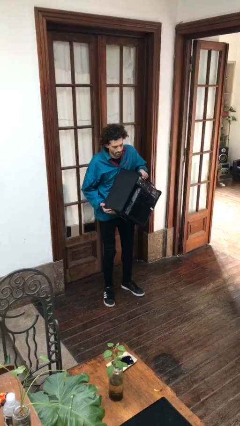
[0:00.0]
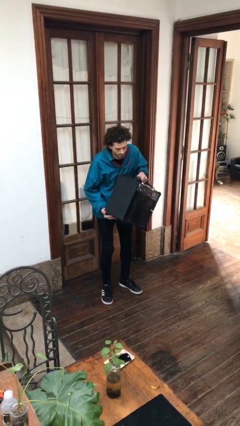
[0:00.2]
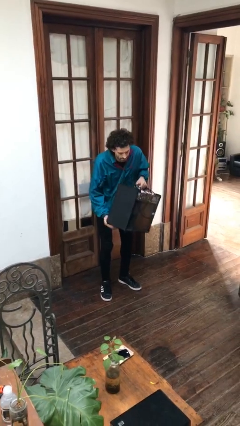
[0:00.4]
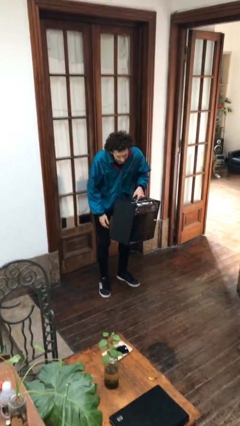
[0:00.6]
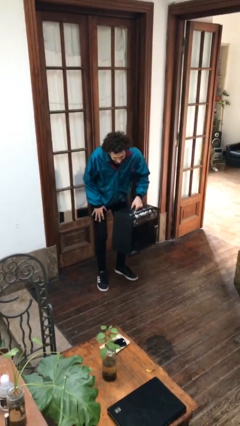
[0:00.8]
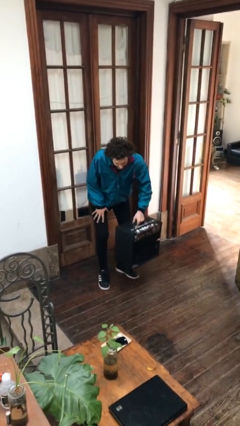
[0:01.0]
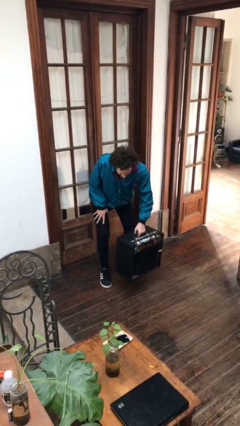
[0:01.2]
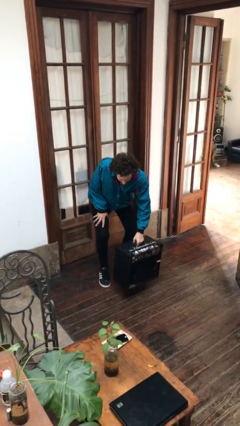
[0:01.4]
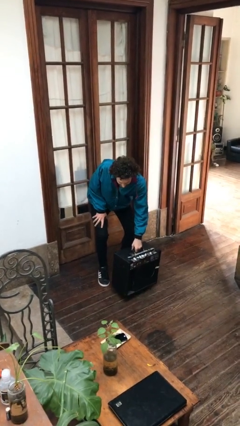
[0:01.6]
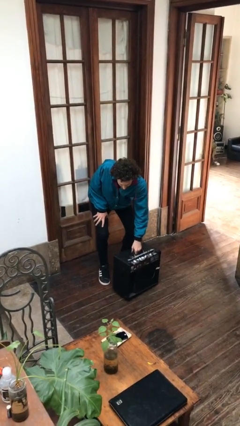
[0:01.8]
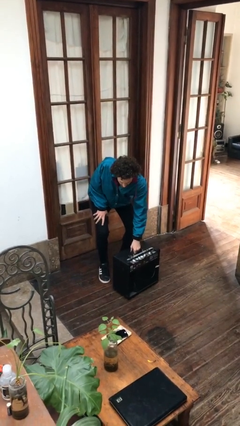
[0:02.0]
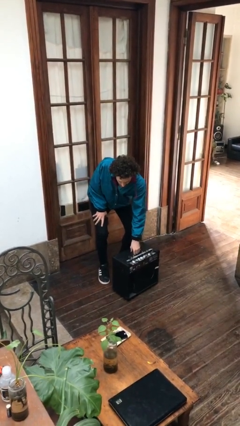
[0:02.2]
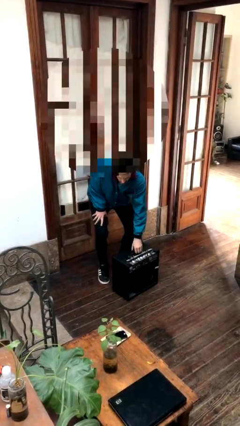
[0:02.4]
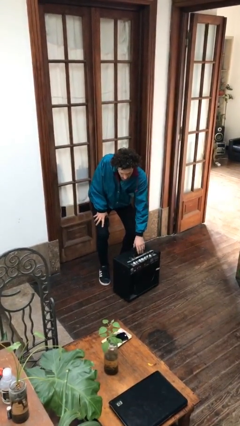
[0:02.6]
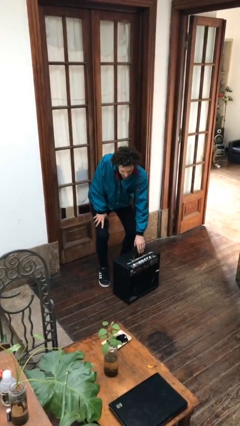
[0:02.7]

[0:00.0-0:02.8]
person puts down object on floor

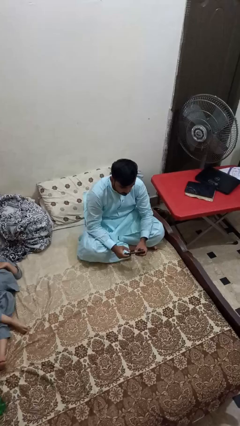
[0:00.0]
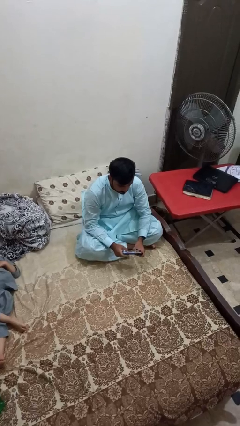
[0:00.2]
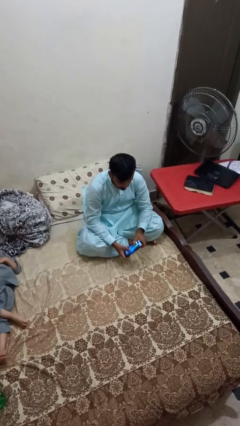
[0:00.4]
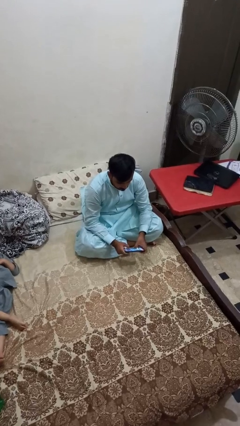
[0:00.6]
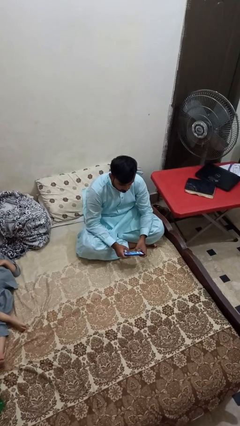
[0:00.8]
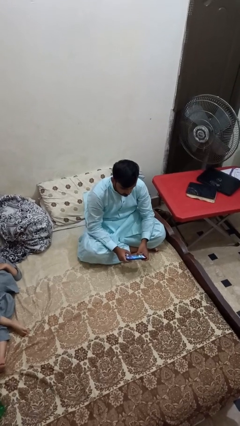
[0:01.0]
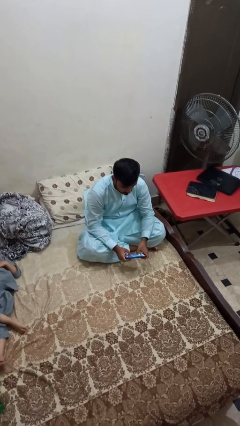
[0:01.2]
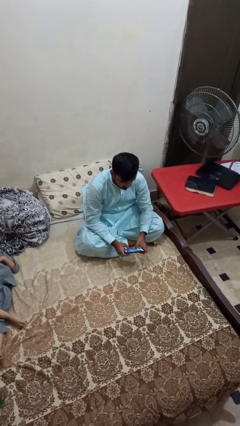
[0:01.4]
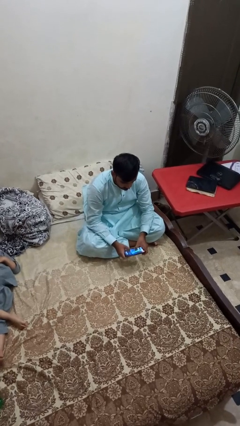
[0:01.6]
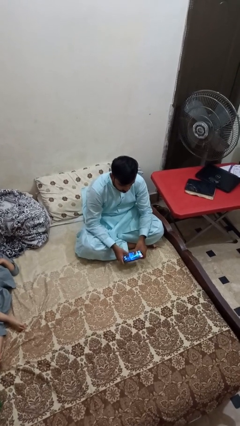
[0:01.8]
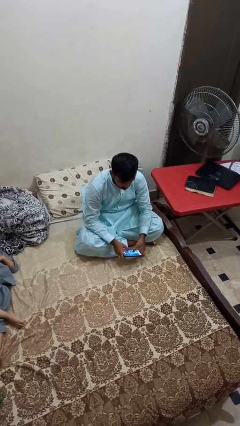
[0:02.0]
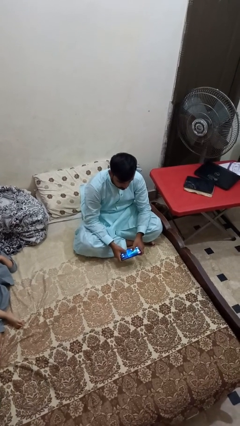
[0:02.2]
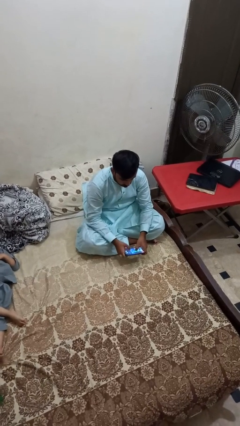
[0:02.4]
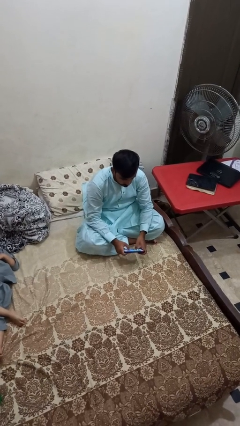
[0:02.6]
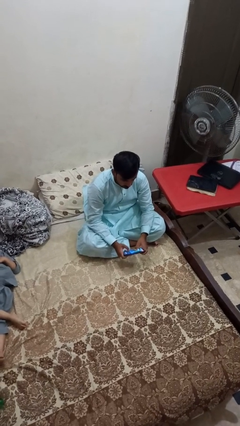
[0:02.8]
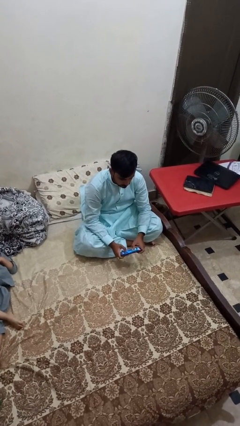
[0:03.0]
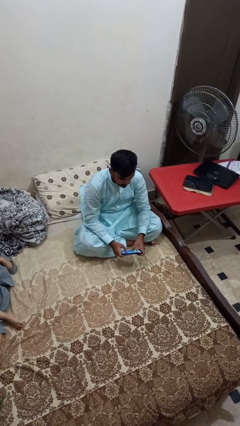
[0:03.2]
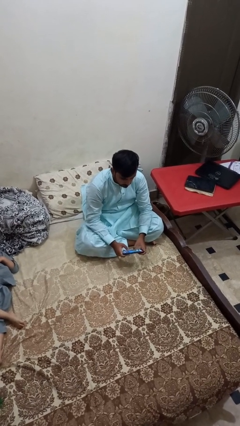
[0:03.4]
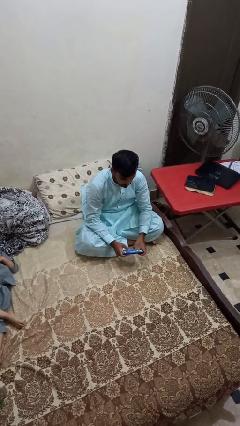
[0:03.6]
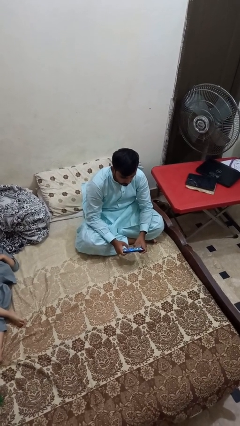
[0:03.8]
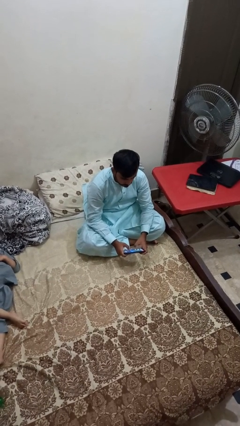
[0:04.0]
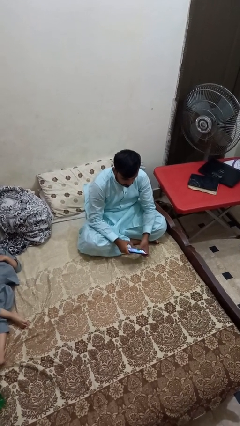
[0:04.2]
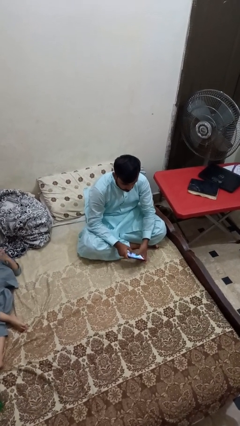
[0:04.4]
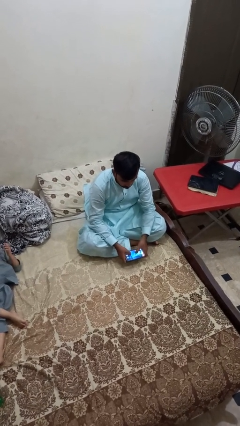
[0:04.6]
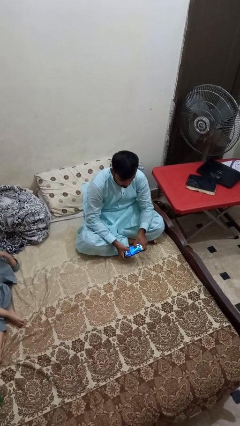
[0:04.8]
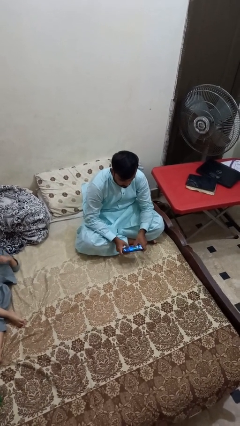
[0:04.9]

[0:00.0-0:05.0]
person interacts with handheld game

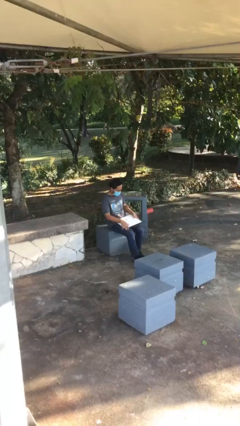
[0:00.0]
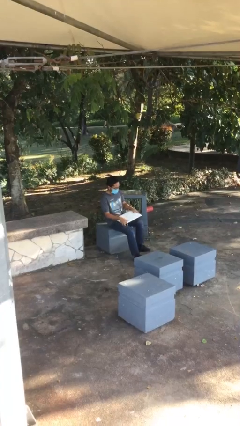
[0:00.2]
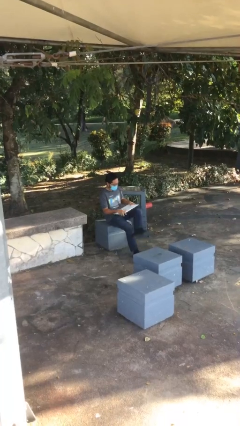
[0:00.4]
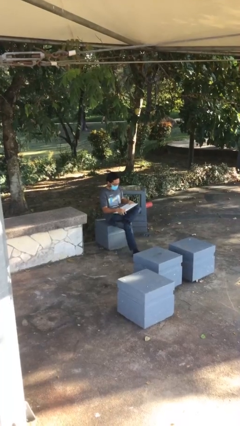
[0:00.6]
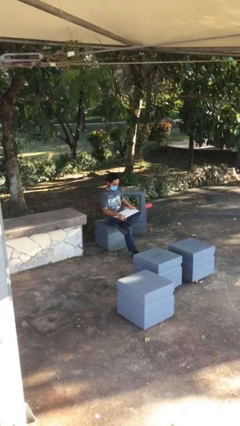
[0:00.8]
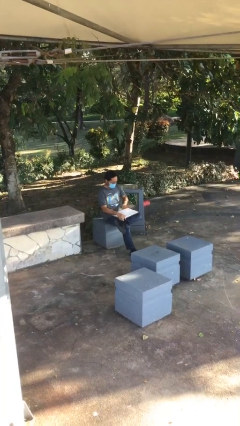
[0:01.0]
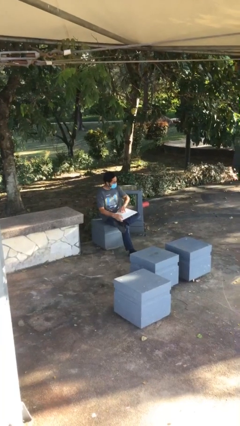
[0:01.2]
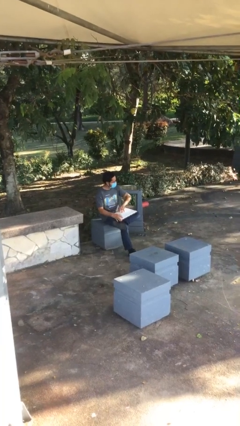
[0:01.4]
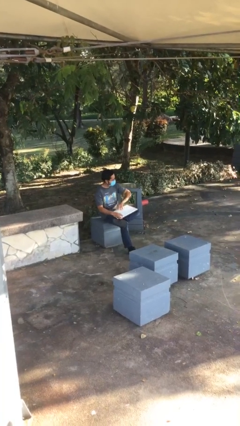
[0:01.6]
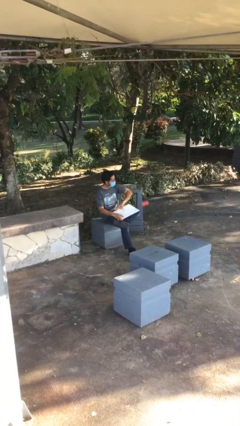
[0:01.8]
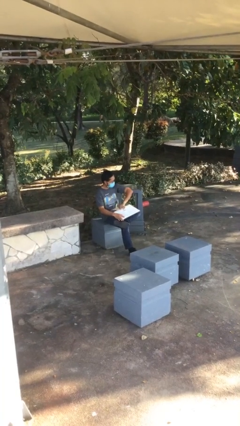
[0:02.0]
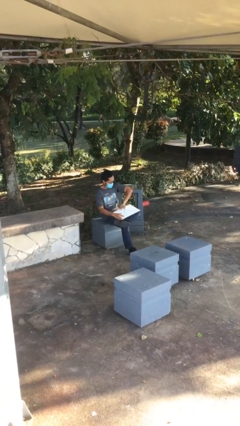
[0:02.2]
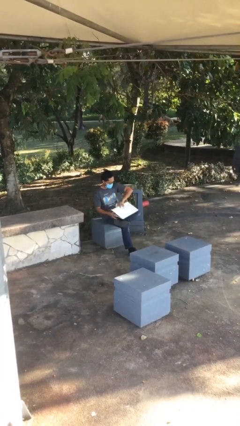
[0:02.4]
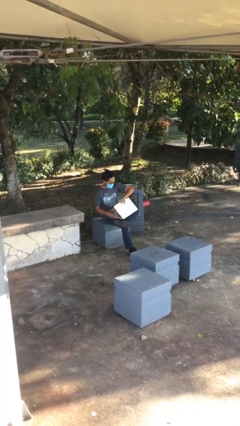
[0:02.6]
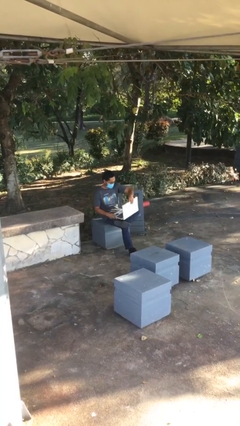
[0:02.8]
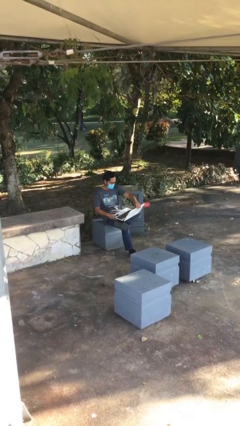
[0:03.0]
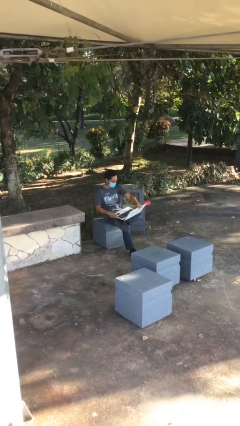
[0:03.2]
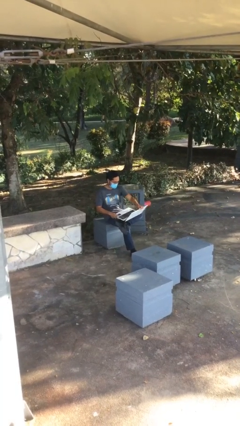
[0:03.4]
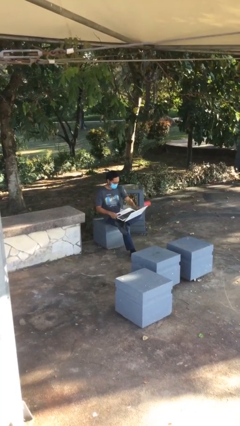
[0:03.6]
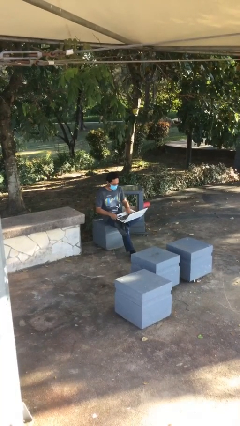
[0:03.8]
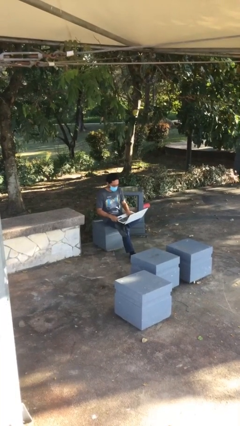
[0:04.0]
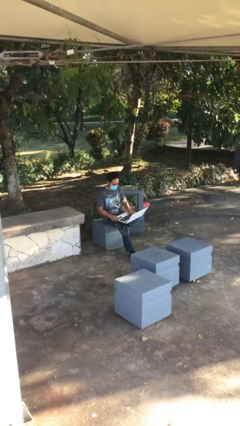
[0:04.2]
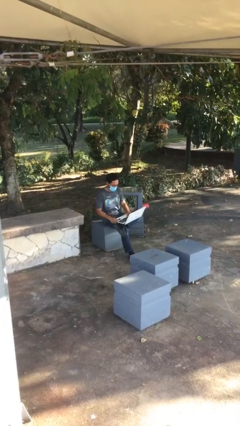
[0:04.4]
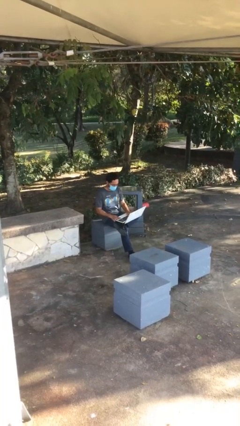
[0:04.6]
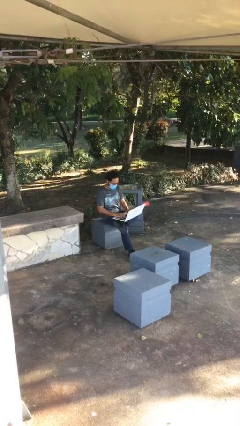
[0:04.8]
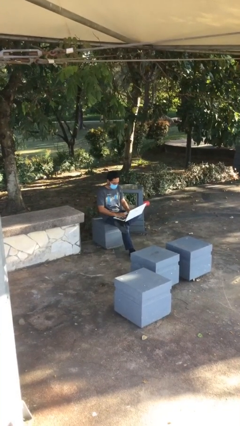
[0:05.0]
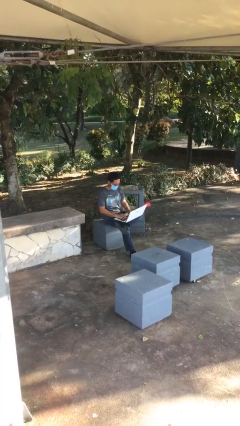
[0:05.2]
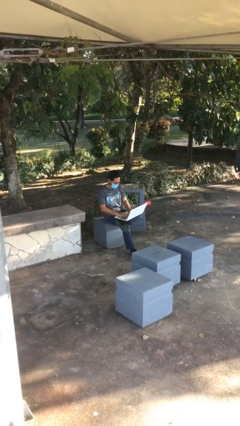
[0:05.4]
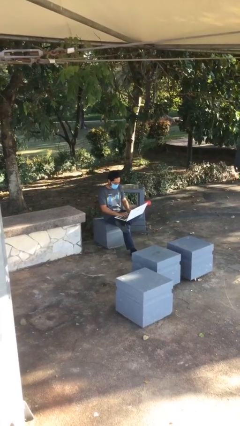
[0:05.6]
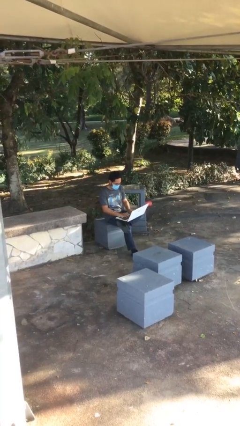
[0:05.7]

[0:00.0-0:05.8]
person interacts with laptop

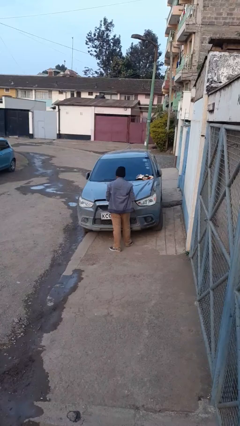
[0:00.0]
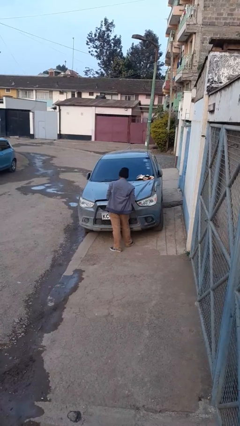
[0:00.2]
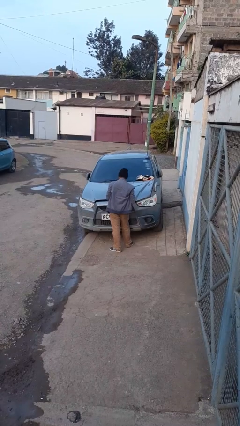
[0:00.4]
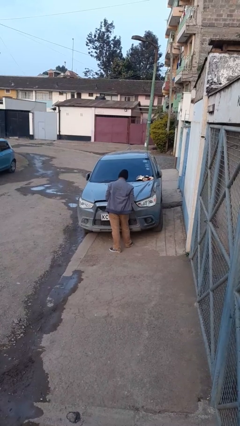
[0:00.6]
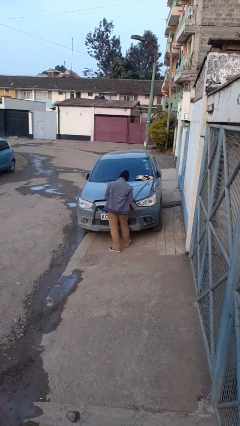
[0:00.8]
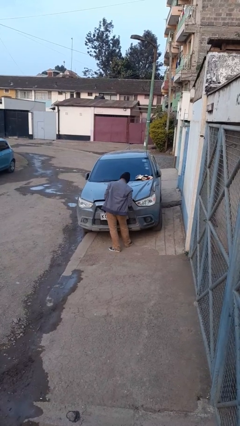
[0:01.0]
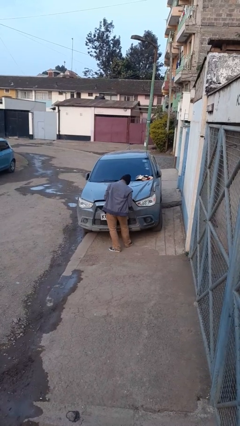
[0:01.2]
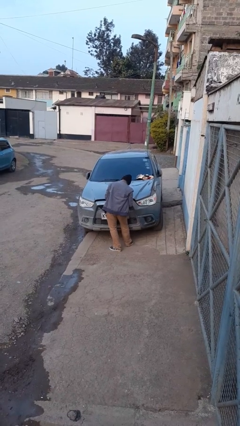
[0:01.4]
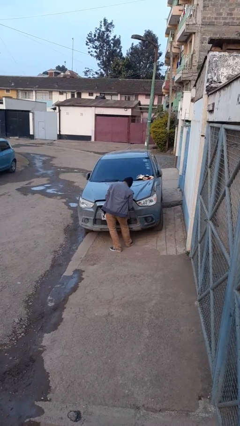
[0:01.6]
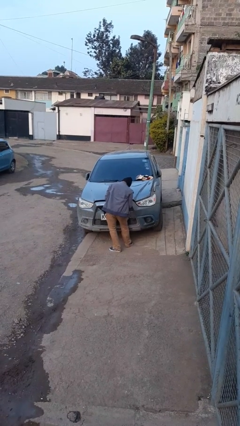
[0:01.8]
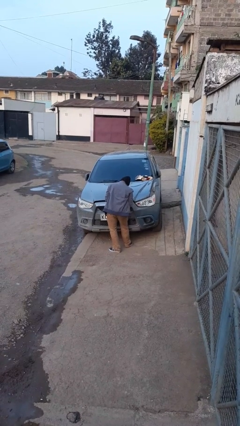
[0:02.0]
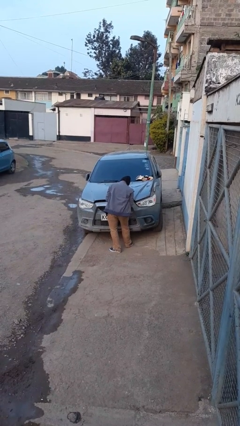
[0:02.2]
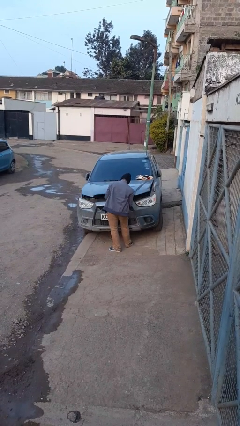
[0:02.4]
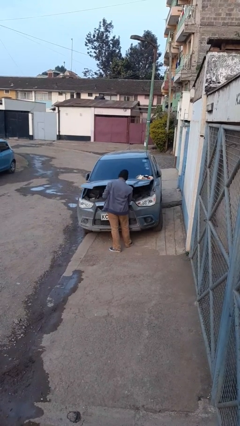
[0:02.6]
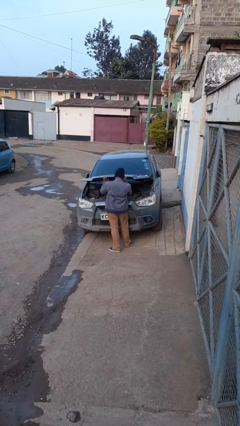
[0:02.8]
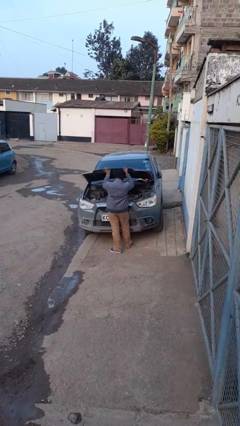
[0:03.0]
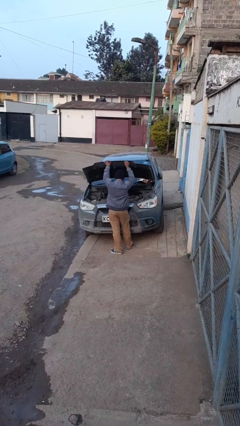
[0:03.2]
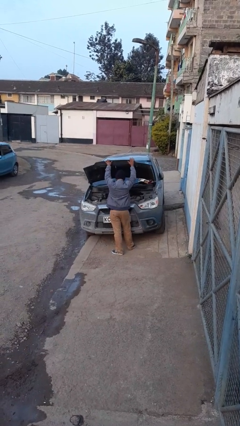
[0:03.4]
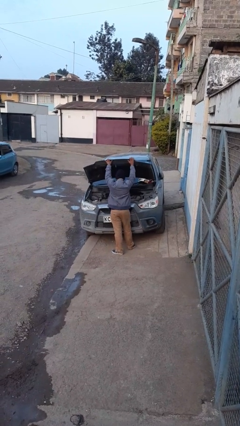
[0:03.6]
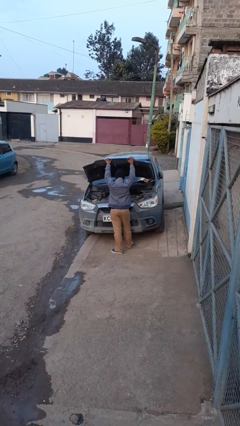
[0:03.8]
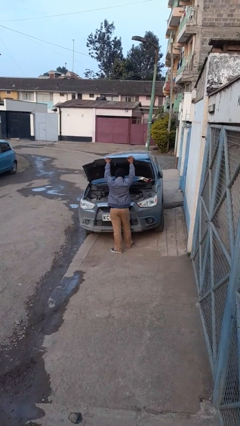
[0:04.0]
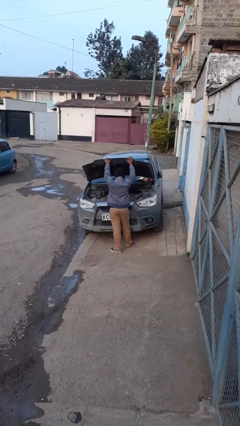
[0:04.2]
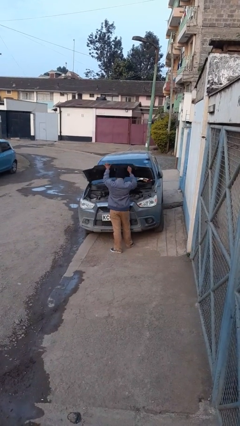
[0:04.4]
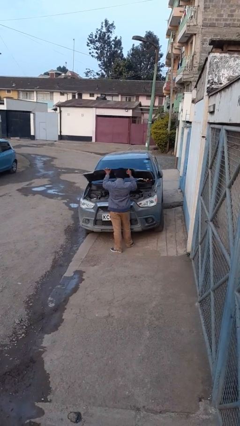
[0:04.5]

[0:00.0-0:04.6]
person opens car hood

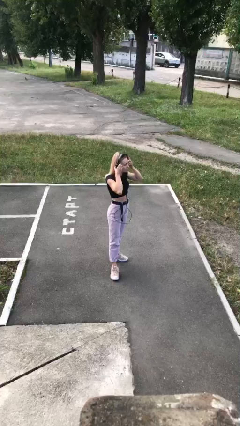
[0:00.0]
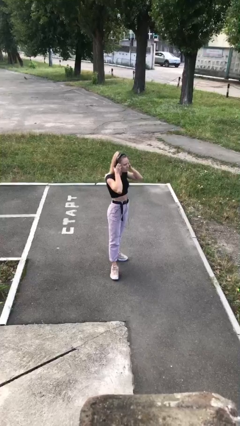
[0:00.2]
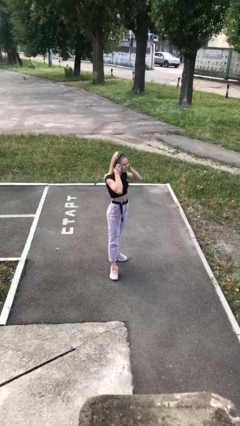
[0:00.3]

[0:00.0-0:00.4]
person puts on headphones
